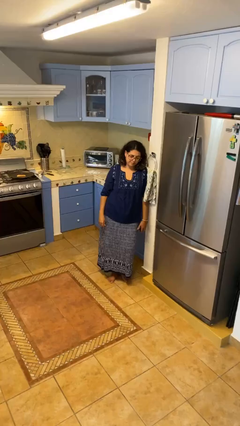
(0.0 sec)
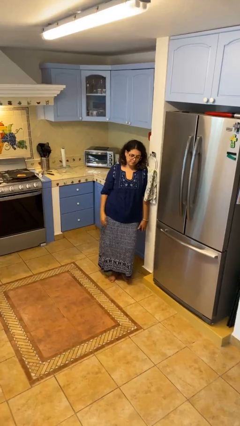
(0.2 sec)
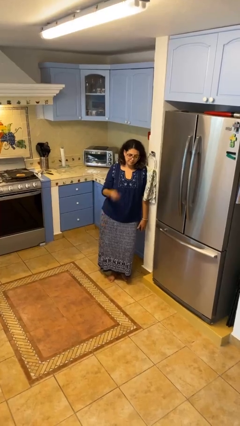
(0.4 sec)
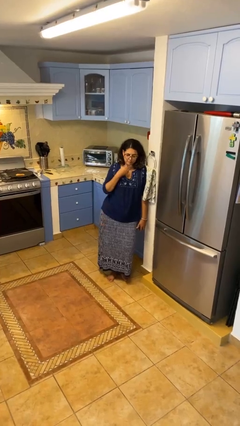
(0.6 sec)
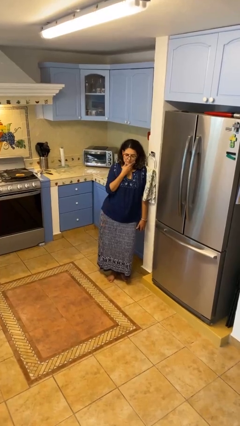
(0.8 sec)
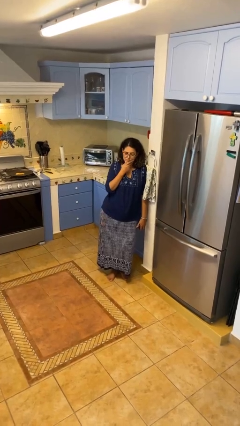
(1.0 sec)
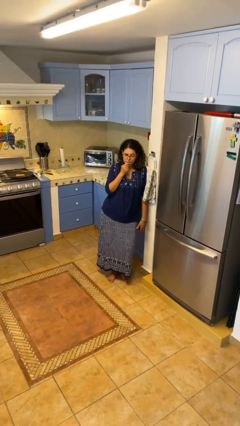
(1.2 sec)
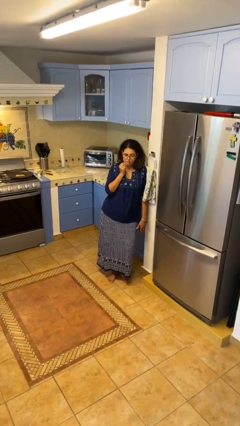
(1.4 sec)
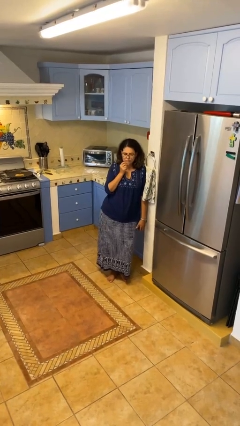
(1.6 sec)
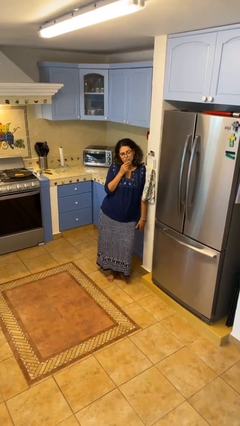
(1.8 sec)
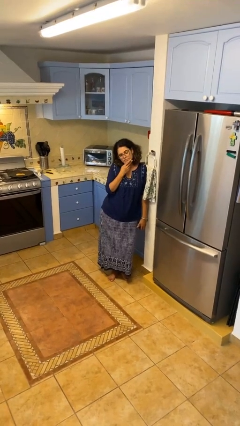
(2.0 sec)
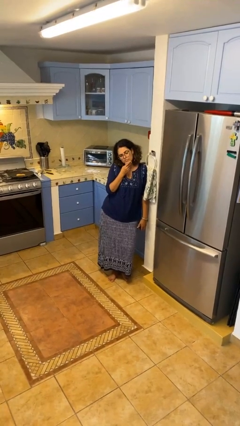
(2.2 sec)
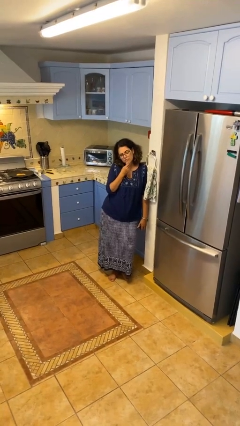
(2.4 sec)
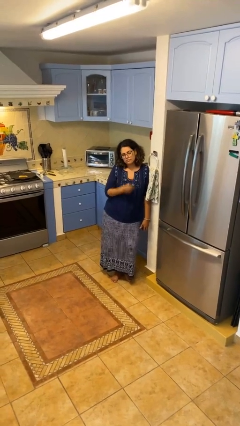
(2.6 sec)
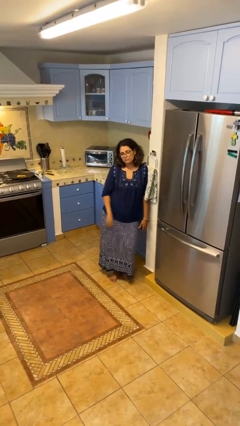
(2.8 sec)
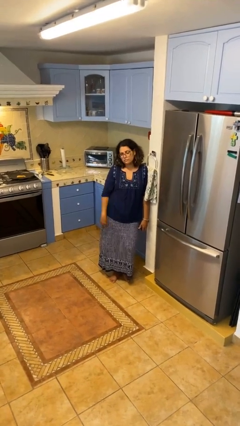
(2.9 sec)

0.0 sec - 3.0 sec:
person strokes chin

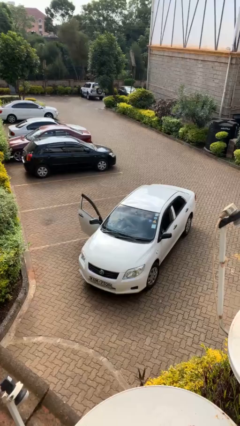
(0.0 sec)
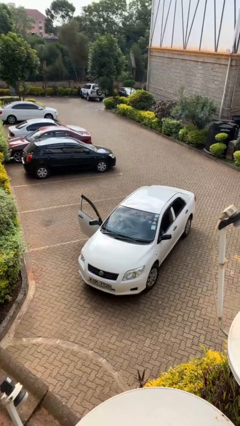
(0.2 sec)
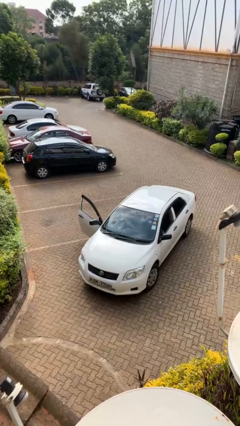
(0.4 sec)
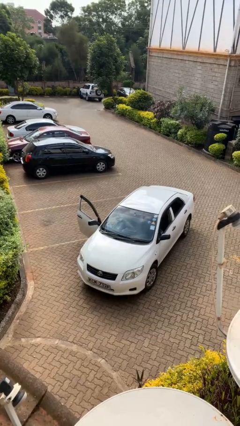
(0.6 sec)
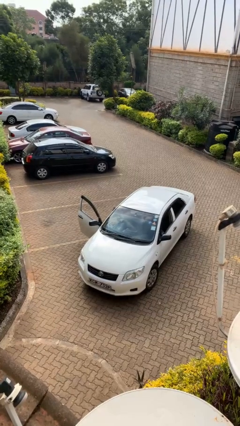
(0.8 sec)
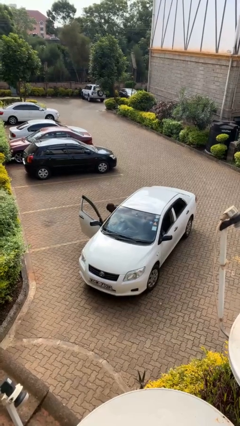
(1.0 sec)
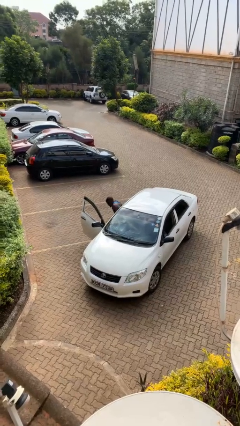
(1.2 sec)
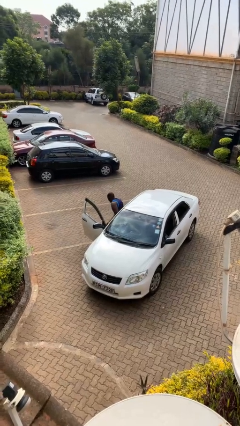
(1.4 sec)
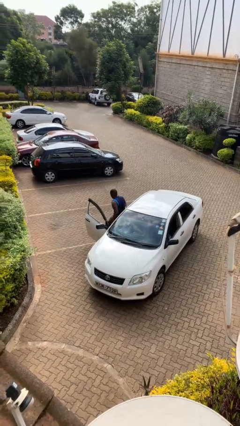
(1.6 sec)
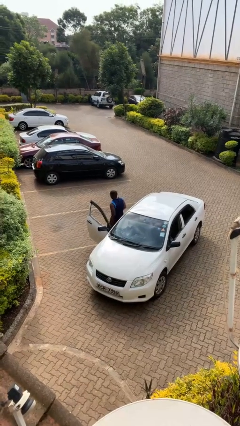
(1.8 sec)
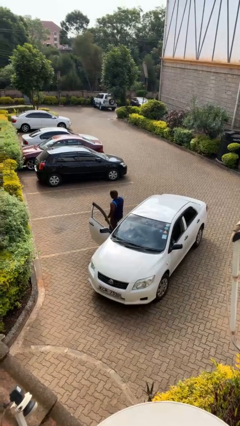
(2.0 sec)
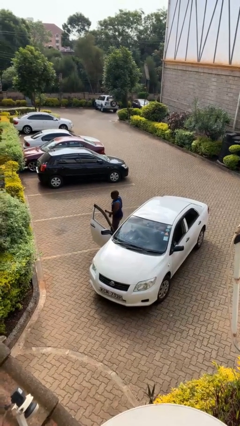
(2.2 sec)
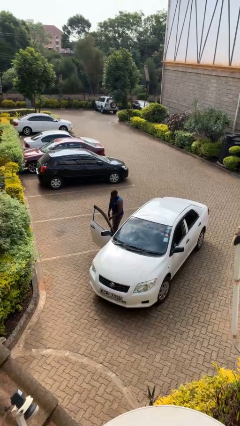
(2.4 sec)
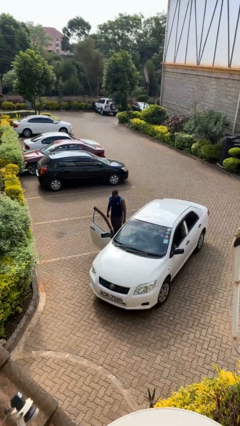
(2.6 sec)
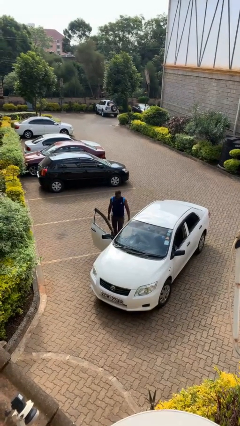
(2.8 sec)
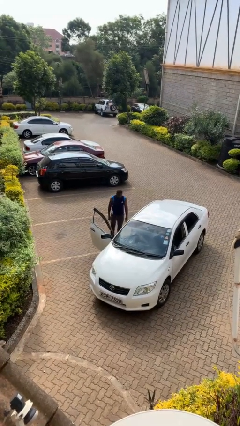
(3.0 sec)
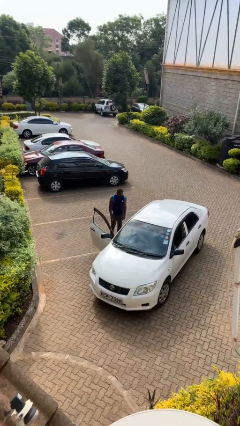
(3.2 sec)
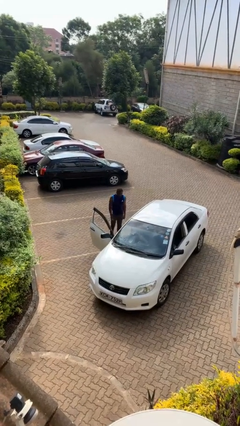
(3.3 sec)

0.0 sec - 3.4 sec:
person exits car

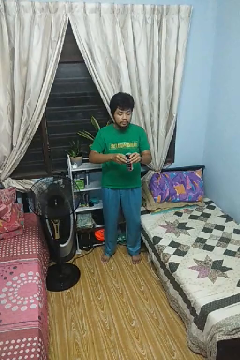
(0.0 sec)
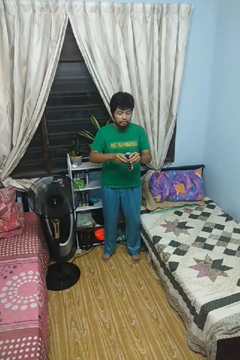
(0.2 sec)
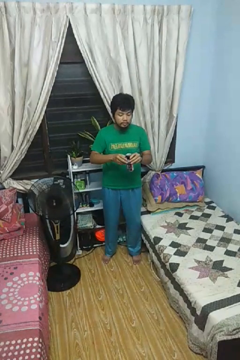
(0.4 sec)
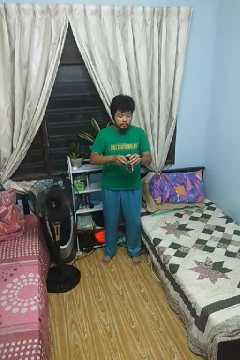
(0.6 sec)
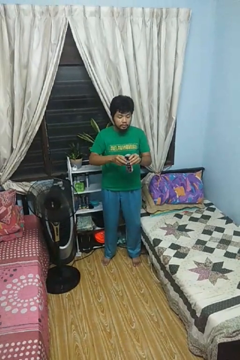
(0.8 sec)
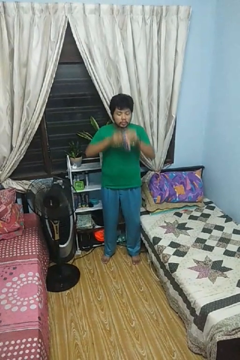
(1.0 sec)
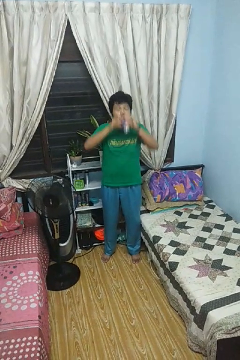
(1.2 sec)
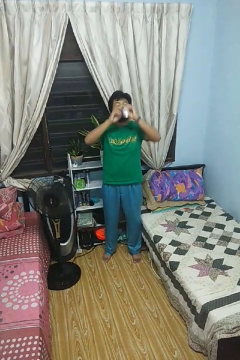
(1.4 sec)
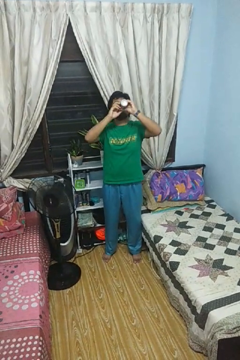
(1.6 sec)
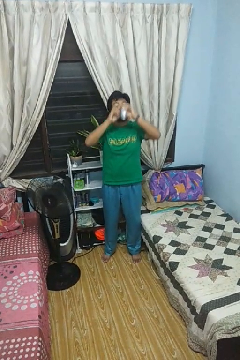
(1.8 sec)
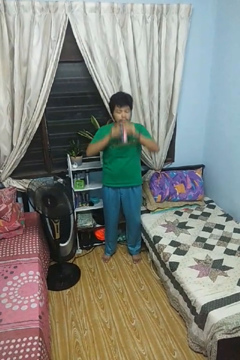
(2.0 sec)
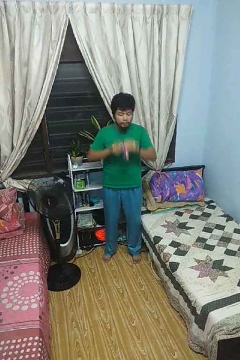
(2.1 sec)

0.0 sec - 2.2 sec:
person drinks from beverage can

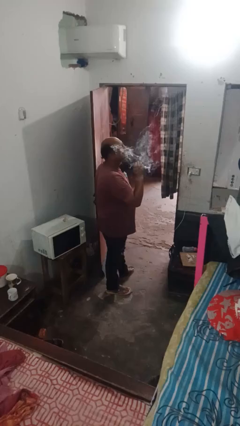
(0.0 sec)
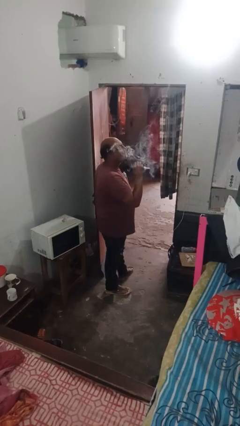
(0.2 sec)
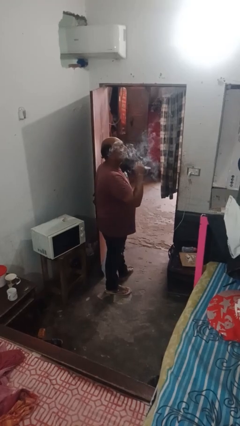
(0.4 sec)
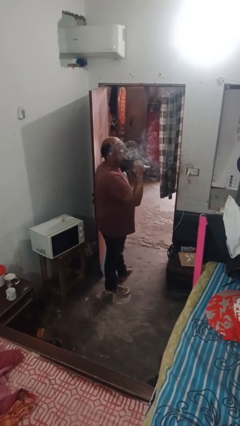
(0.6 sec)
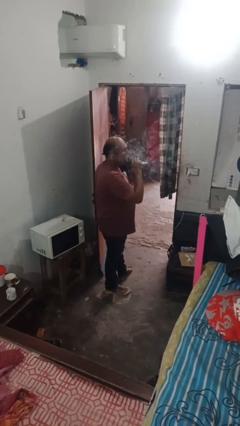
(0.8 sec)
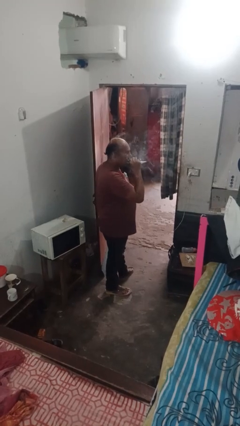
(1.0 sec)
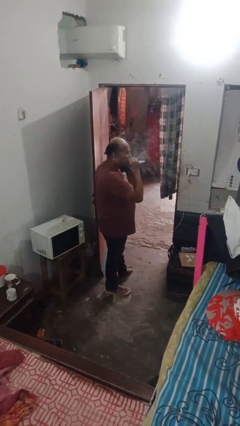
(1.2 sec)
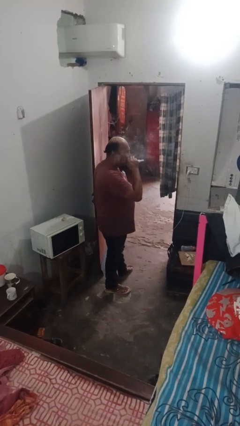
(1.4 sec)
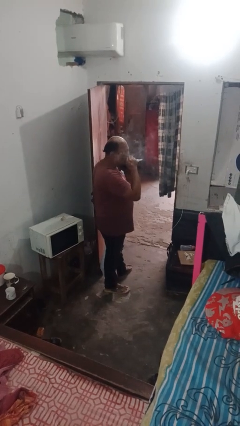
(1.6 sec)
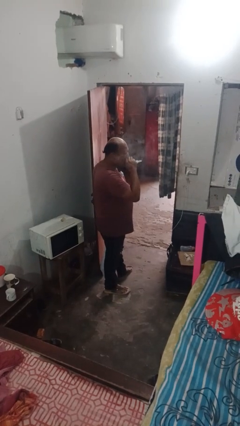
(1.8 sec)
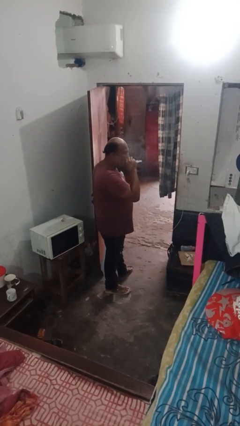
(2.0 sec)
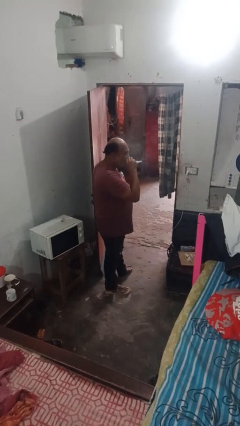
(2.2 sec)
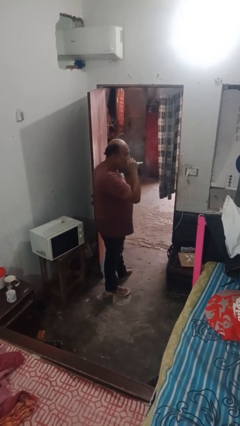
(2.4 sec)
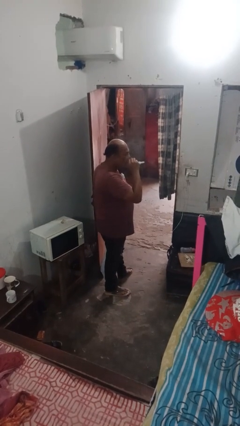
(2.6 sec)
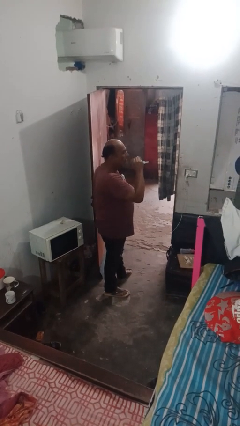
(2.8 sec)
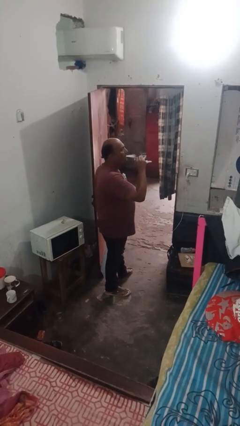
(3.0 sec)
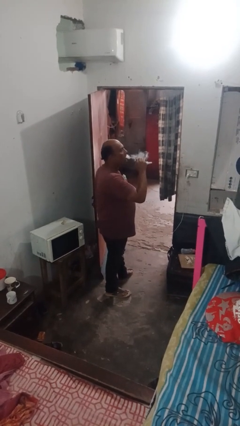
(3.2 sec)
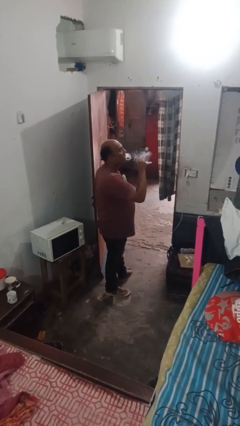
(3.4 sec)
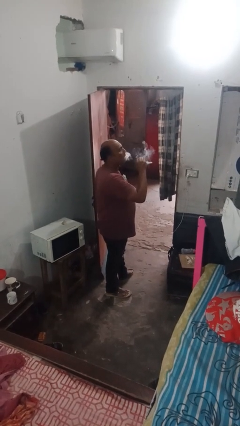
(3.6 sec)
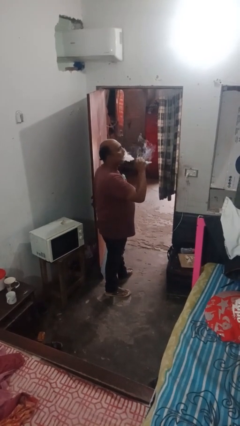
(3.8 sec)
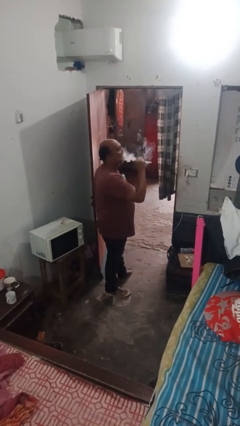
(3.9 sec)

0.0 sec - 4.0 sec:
person vapes

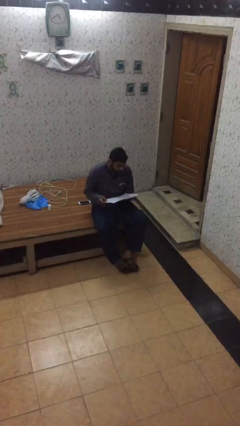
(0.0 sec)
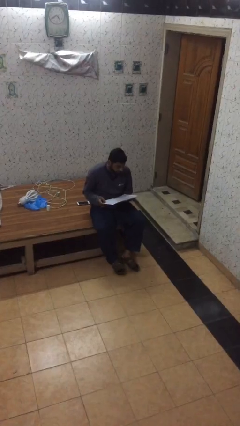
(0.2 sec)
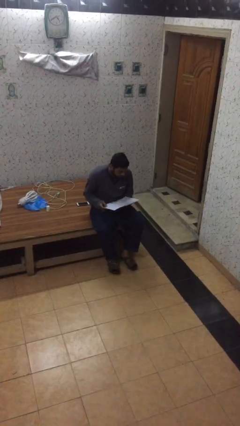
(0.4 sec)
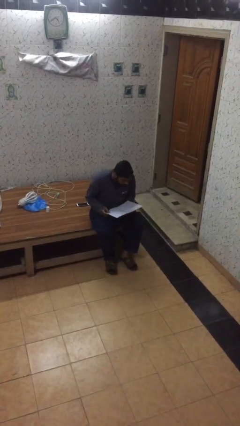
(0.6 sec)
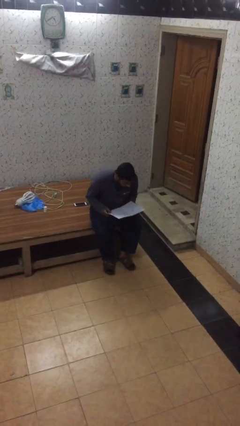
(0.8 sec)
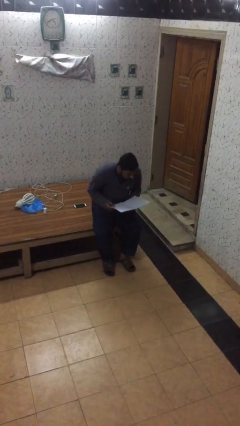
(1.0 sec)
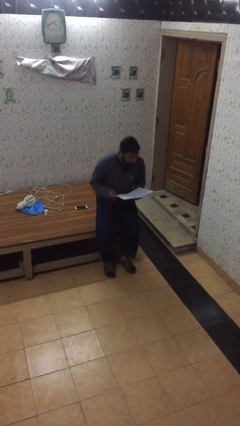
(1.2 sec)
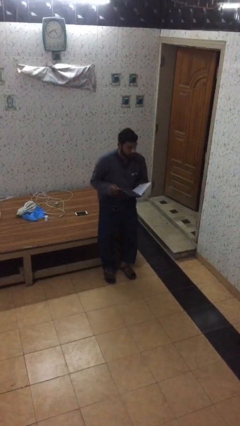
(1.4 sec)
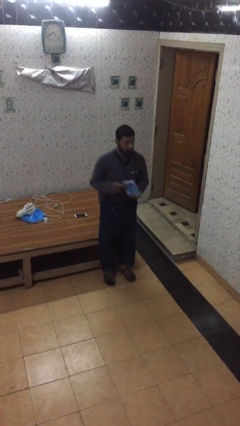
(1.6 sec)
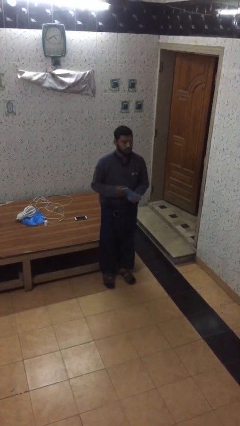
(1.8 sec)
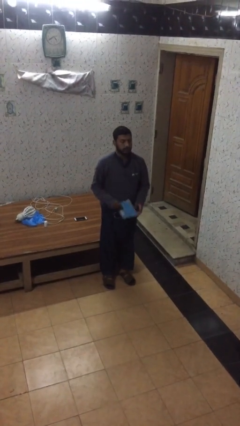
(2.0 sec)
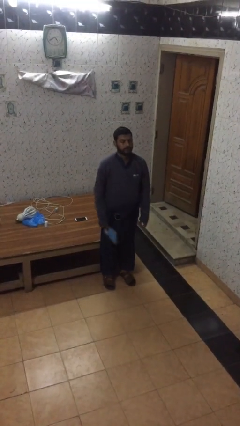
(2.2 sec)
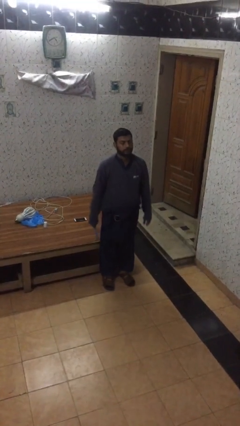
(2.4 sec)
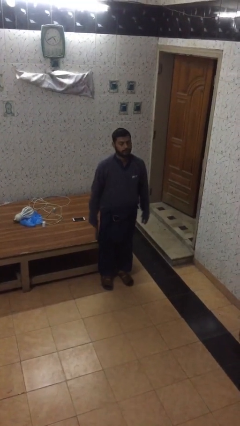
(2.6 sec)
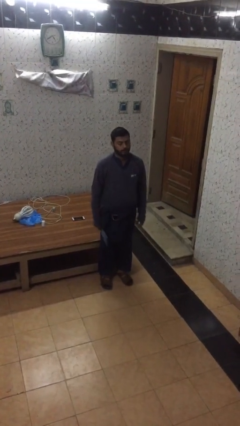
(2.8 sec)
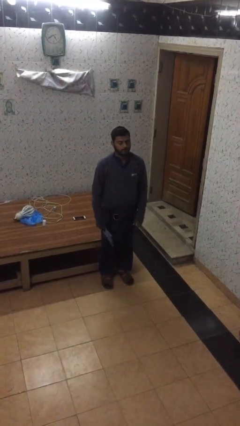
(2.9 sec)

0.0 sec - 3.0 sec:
person stands up

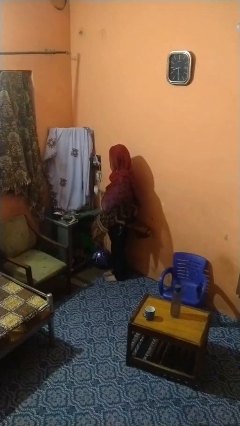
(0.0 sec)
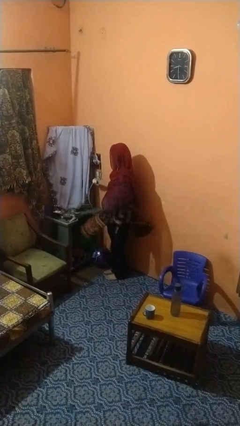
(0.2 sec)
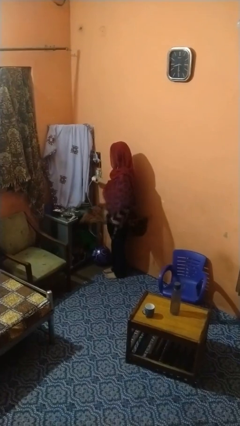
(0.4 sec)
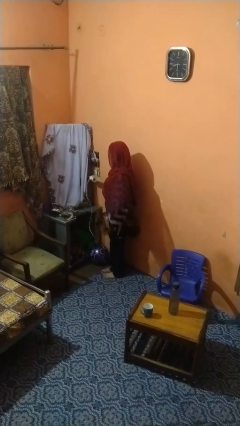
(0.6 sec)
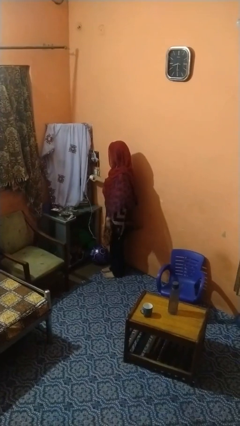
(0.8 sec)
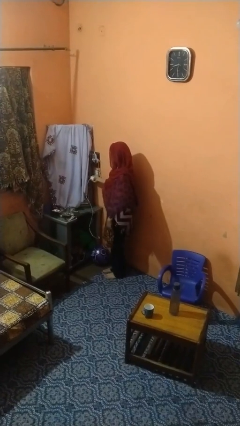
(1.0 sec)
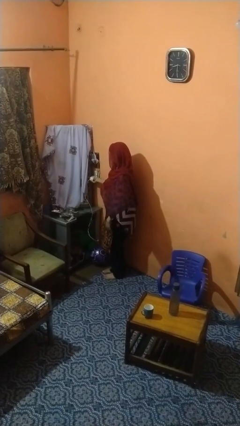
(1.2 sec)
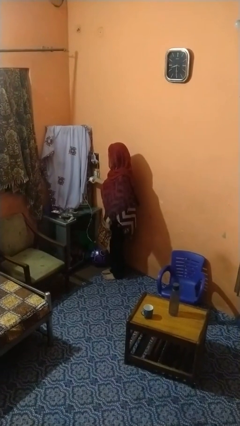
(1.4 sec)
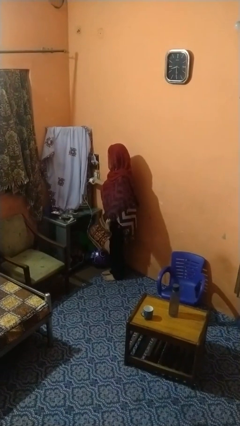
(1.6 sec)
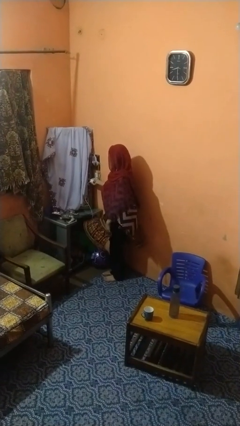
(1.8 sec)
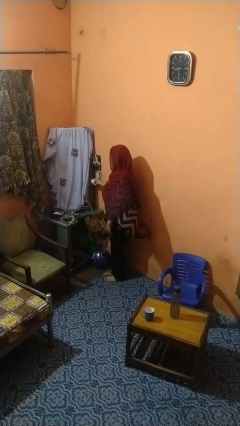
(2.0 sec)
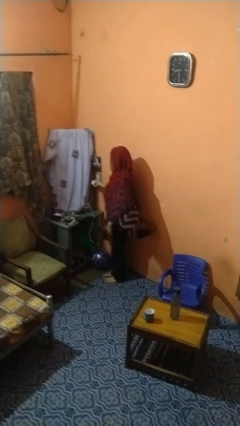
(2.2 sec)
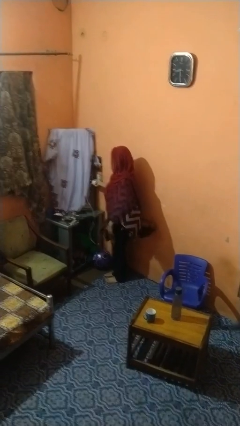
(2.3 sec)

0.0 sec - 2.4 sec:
person plugs into electrical socket
